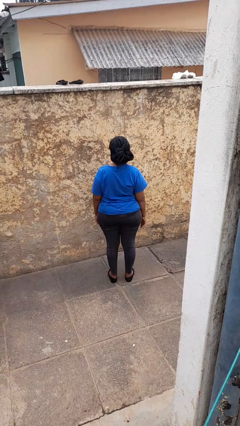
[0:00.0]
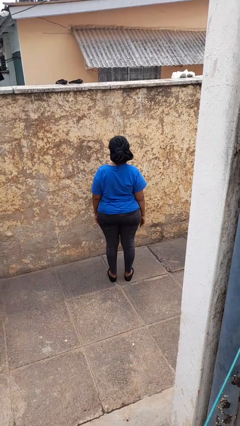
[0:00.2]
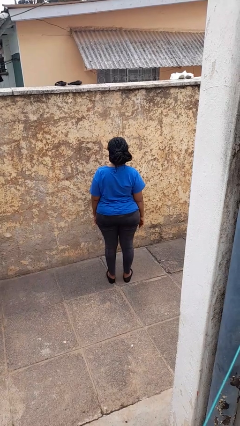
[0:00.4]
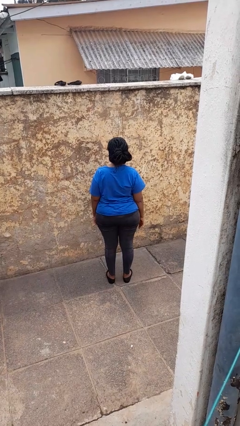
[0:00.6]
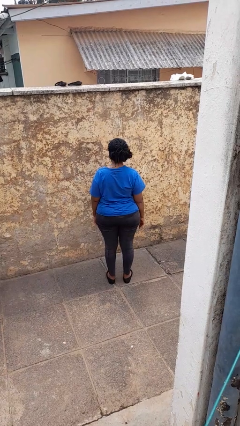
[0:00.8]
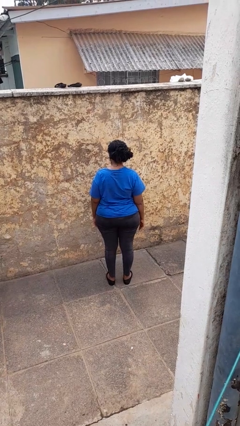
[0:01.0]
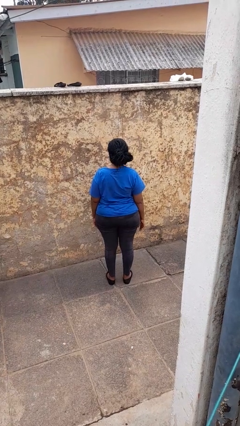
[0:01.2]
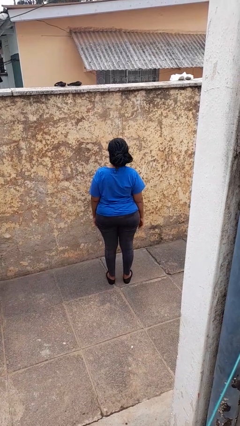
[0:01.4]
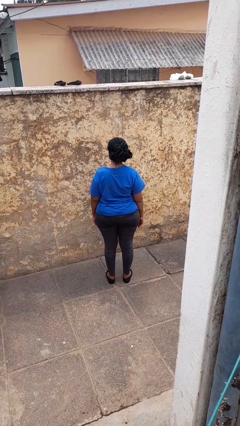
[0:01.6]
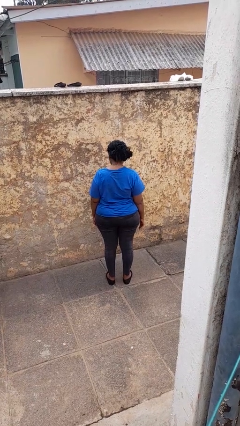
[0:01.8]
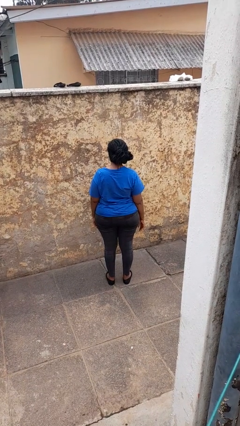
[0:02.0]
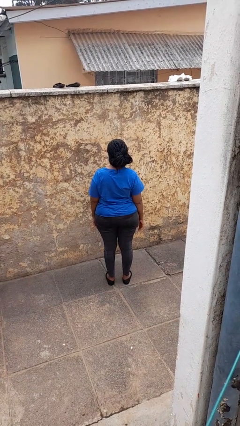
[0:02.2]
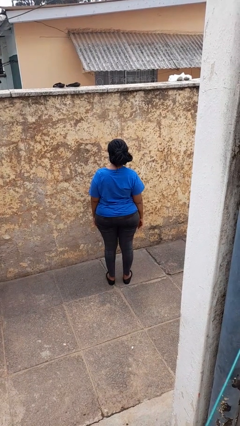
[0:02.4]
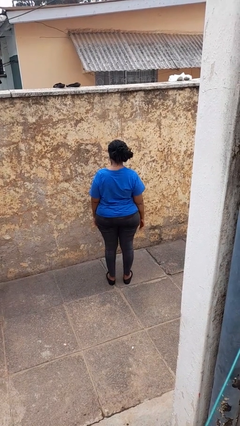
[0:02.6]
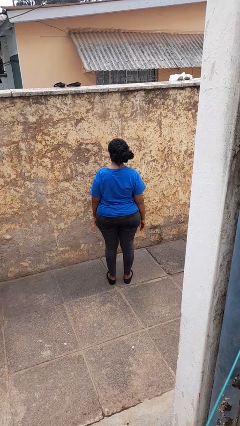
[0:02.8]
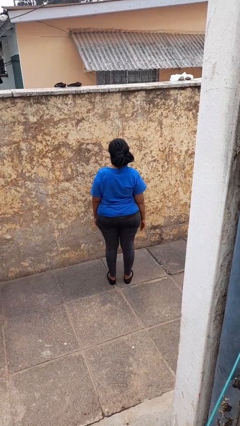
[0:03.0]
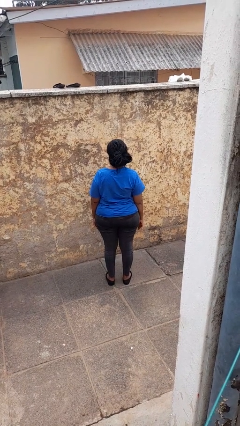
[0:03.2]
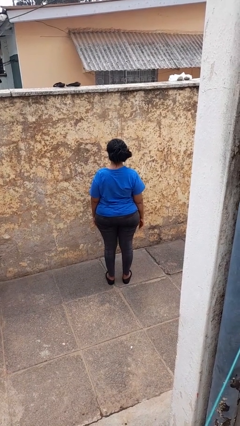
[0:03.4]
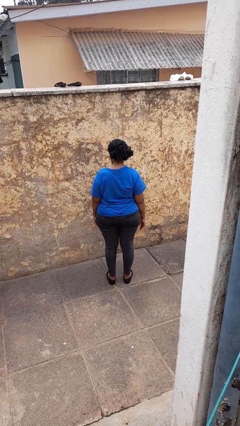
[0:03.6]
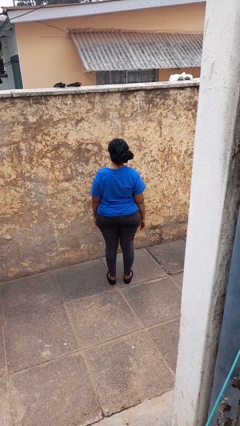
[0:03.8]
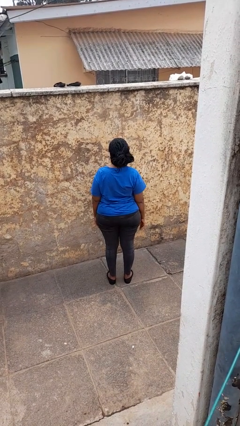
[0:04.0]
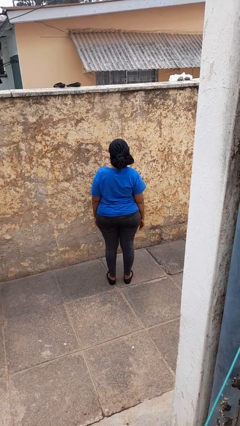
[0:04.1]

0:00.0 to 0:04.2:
person nods head

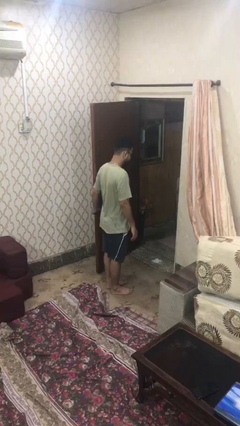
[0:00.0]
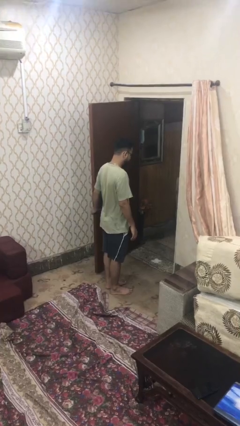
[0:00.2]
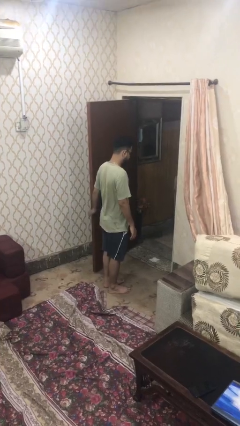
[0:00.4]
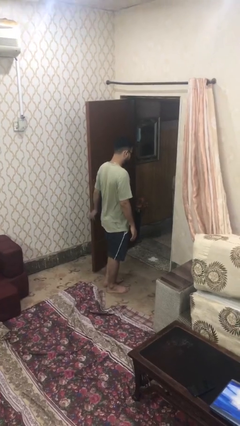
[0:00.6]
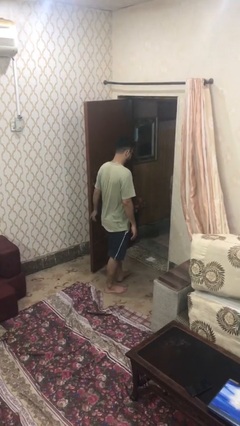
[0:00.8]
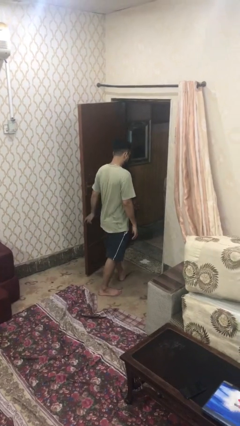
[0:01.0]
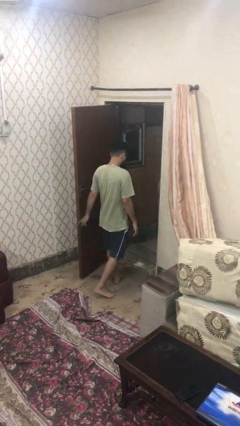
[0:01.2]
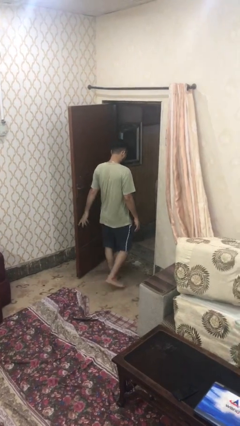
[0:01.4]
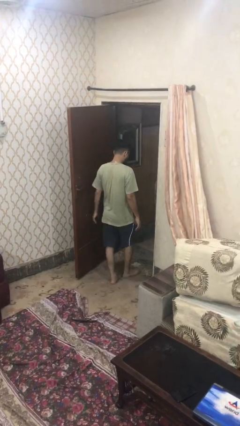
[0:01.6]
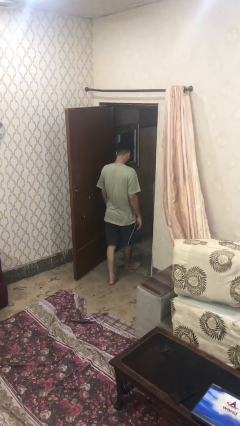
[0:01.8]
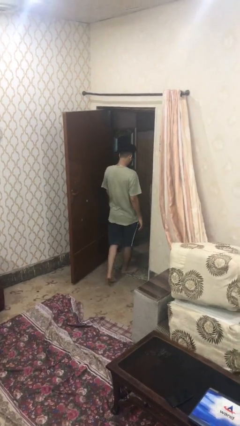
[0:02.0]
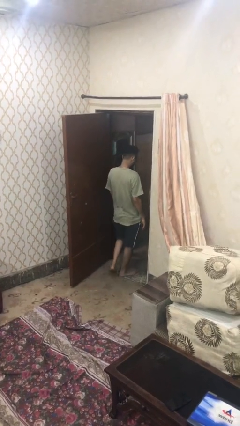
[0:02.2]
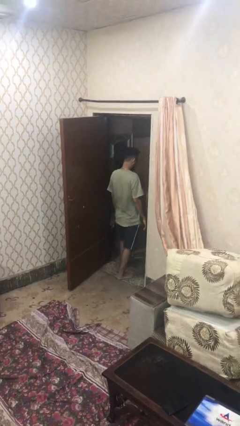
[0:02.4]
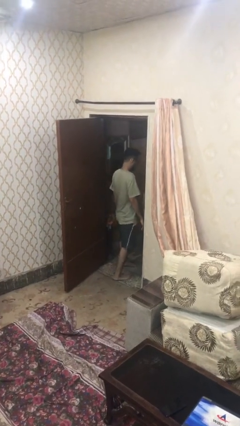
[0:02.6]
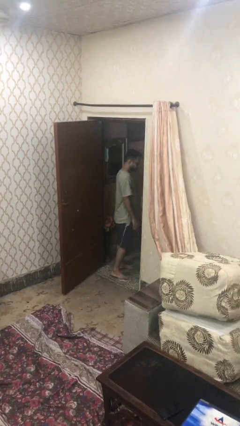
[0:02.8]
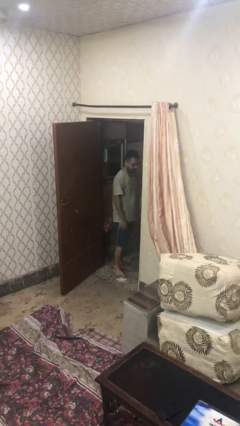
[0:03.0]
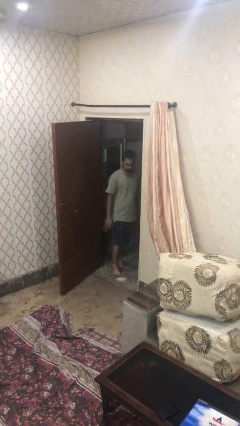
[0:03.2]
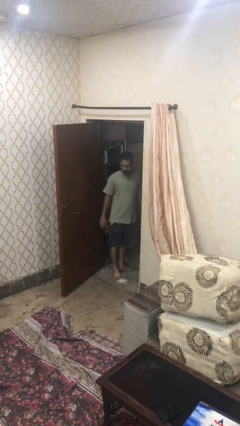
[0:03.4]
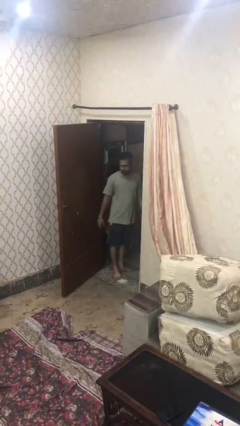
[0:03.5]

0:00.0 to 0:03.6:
person exits scene through structure

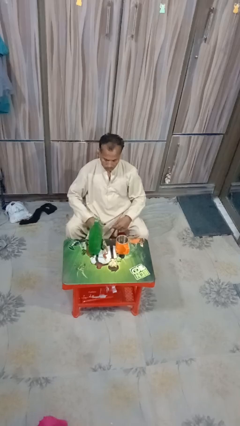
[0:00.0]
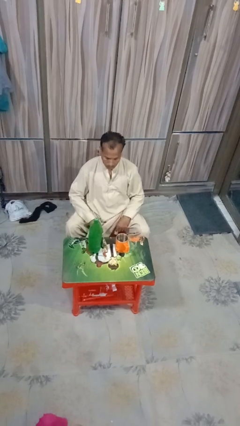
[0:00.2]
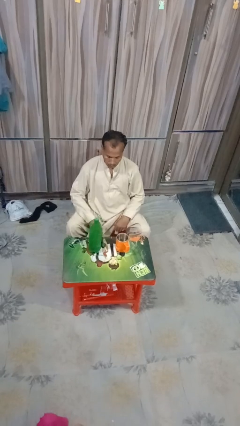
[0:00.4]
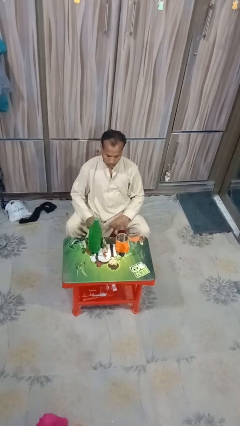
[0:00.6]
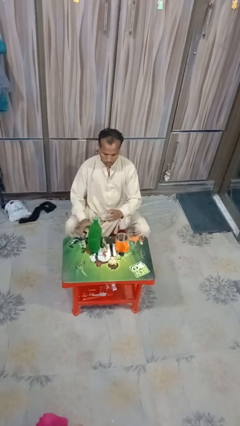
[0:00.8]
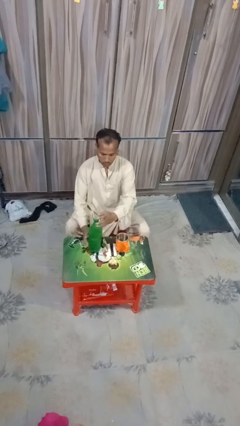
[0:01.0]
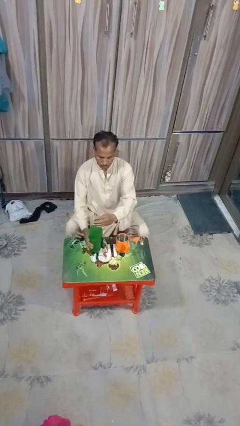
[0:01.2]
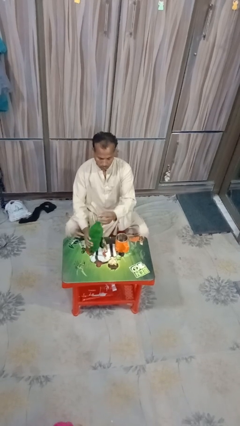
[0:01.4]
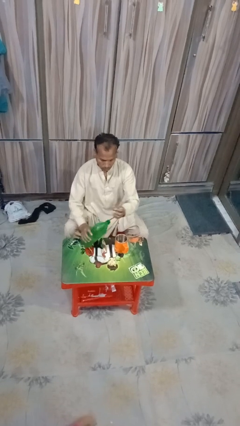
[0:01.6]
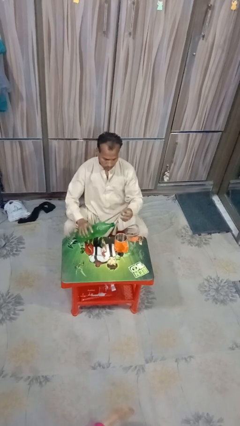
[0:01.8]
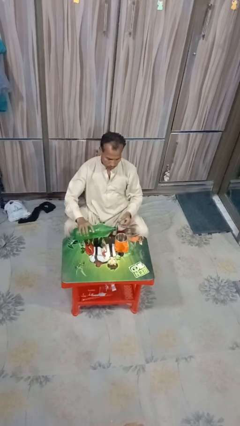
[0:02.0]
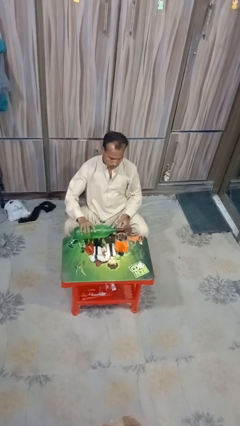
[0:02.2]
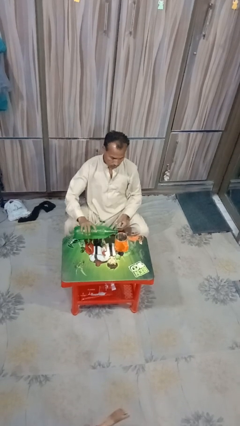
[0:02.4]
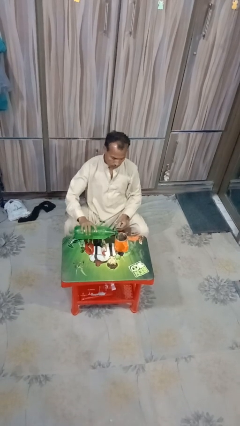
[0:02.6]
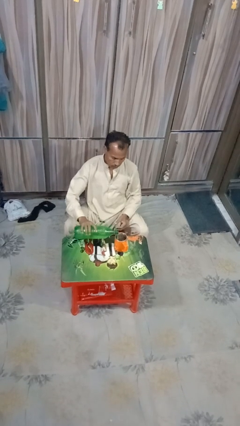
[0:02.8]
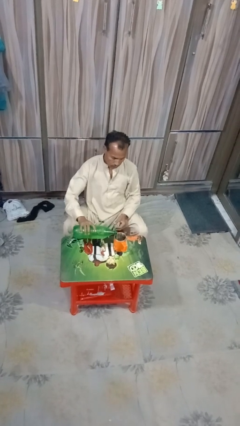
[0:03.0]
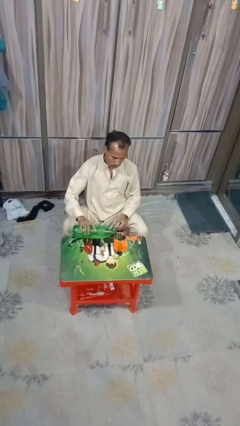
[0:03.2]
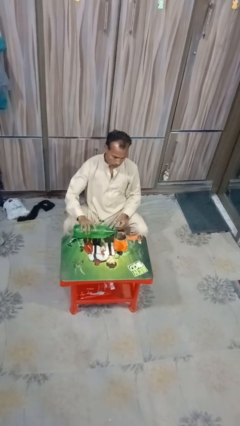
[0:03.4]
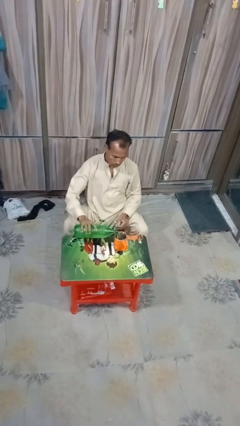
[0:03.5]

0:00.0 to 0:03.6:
person pours liquid into cup

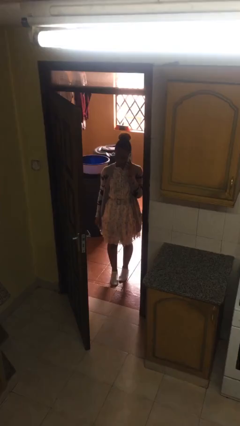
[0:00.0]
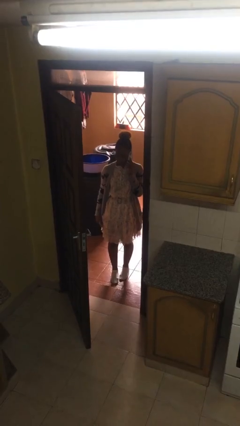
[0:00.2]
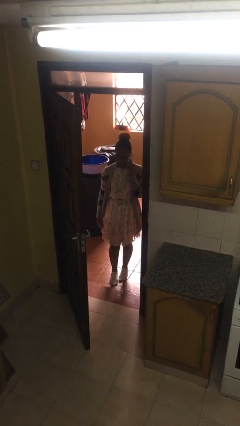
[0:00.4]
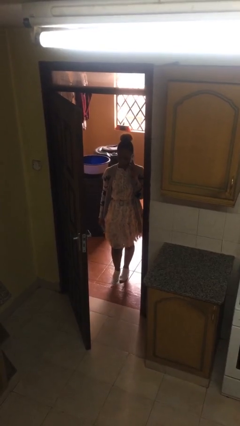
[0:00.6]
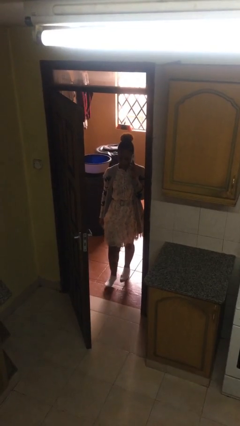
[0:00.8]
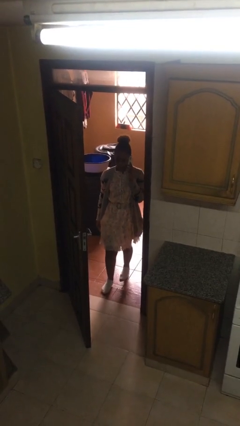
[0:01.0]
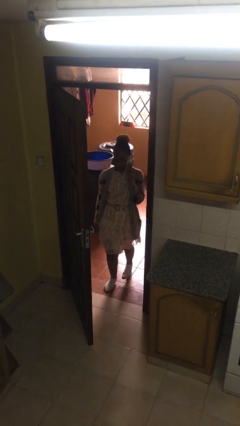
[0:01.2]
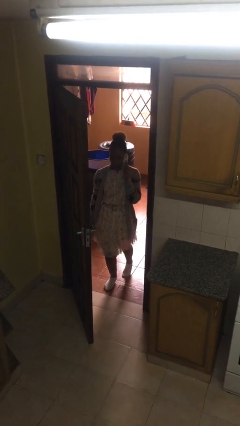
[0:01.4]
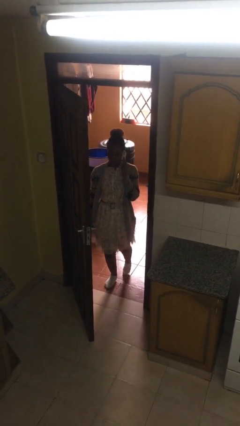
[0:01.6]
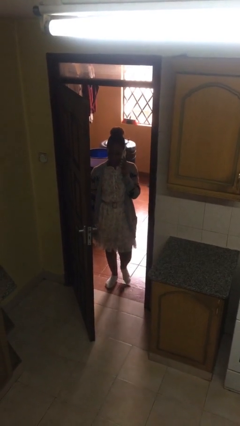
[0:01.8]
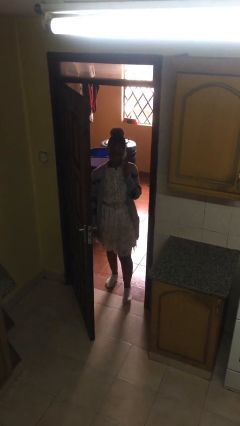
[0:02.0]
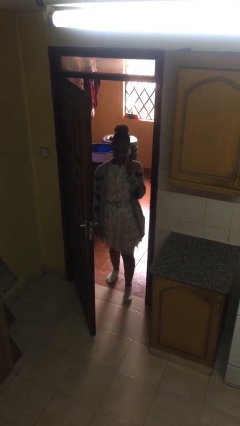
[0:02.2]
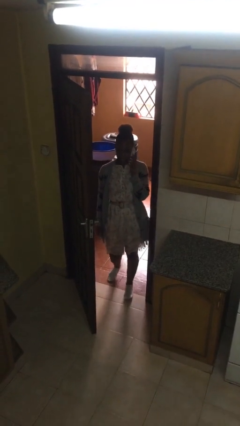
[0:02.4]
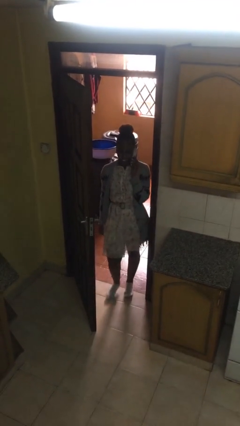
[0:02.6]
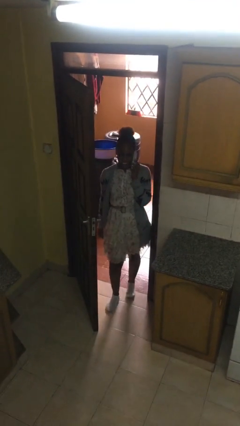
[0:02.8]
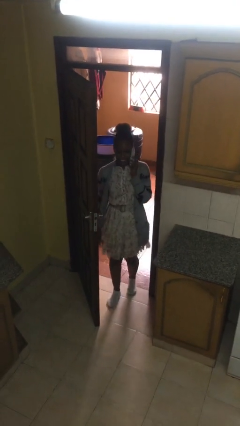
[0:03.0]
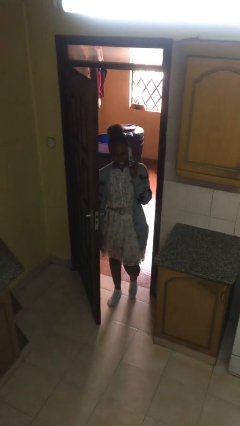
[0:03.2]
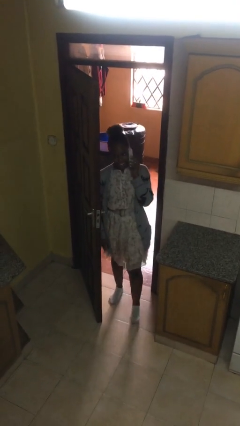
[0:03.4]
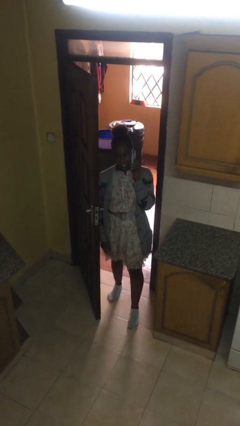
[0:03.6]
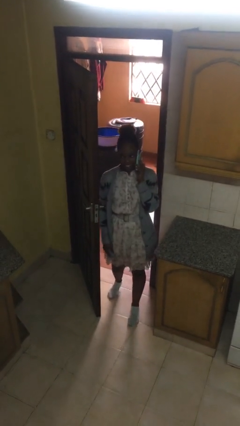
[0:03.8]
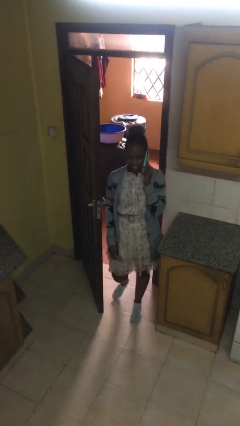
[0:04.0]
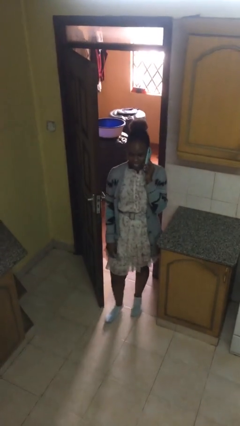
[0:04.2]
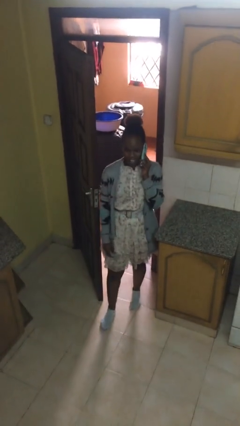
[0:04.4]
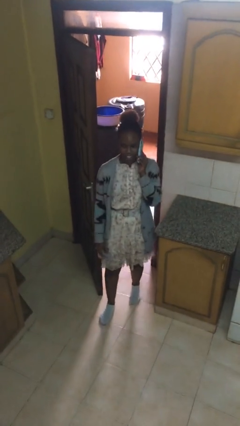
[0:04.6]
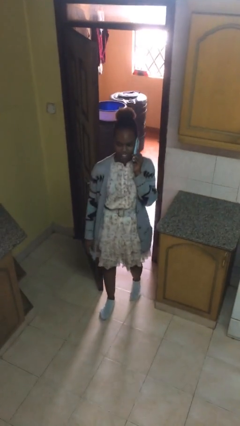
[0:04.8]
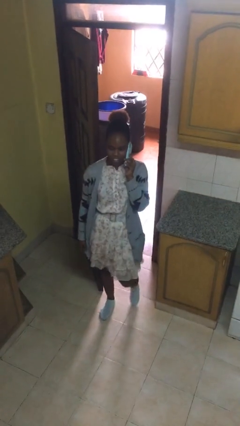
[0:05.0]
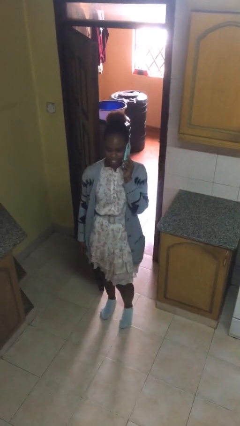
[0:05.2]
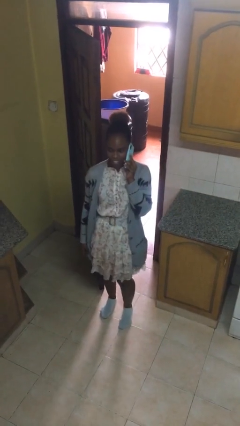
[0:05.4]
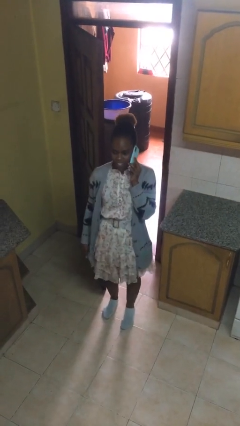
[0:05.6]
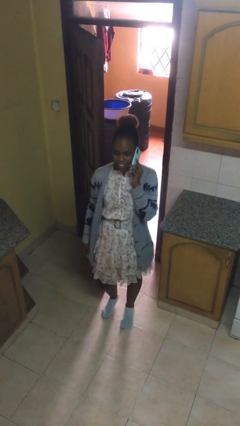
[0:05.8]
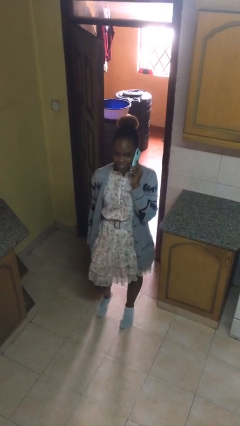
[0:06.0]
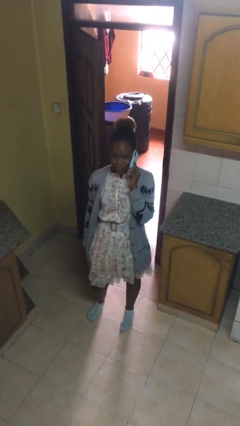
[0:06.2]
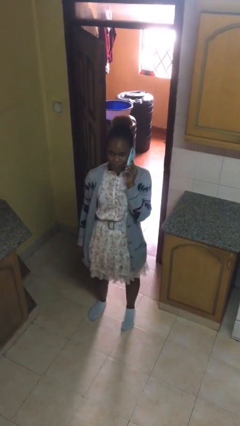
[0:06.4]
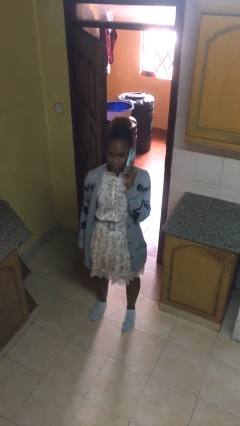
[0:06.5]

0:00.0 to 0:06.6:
person enters scene through structure
